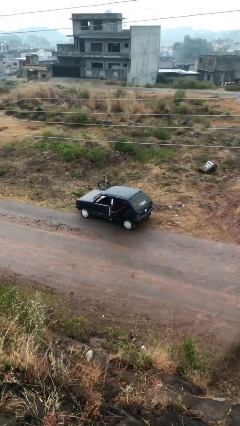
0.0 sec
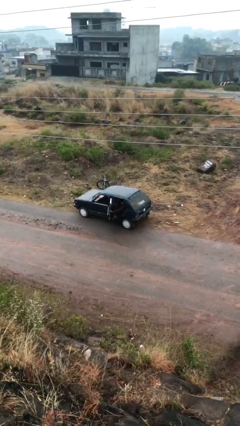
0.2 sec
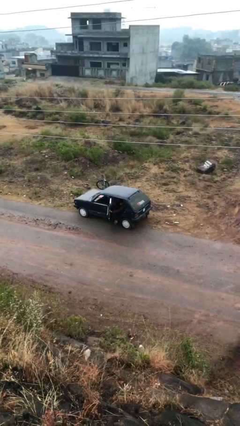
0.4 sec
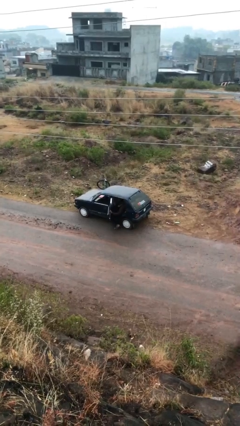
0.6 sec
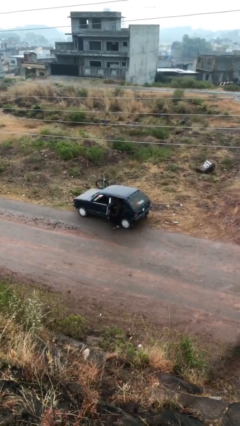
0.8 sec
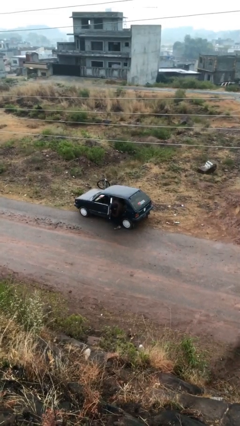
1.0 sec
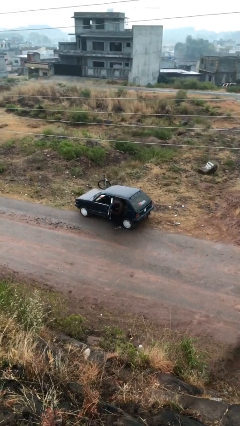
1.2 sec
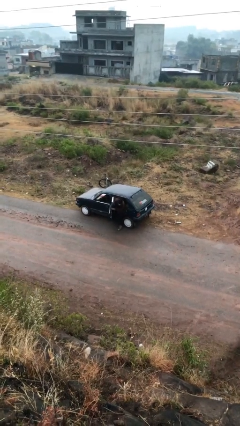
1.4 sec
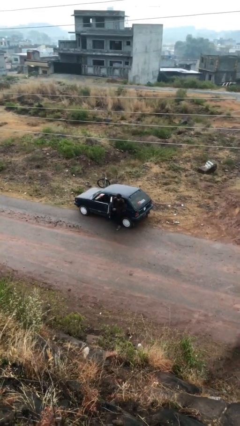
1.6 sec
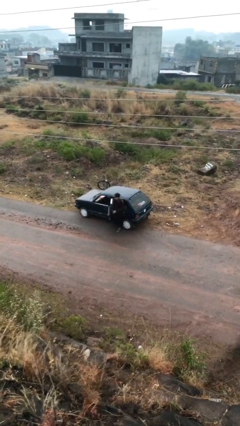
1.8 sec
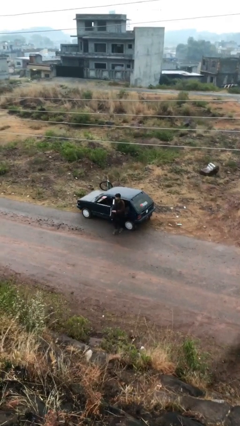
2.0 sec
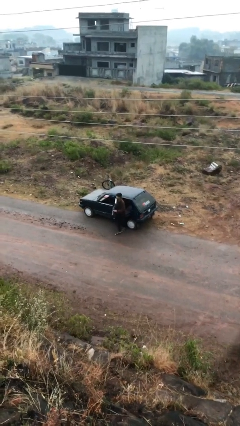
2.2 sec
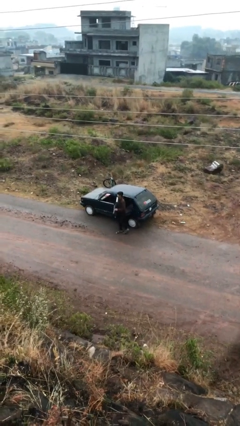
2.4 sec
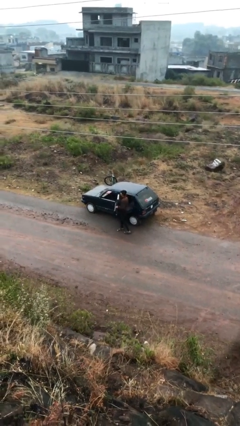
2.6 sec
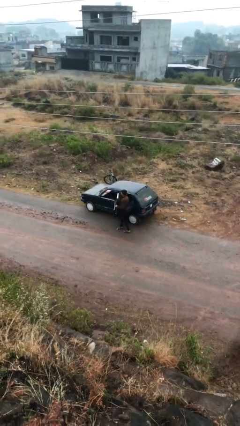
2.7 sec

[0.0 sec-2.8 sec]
person exits car

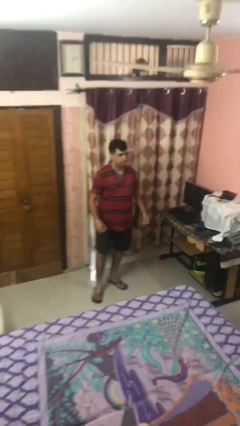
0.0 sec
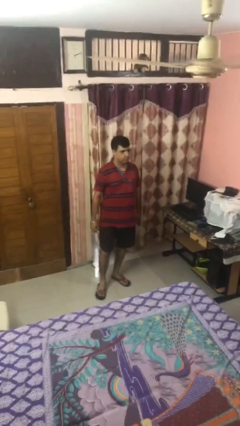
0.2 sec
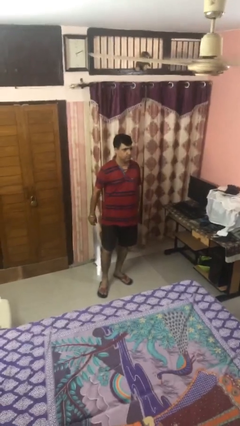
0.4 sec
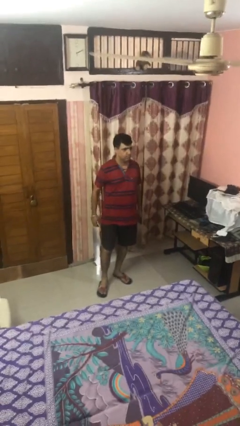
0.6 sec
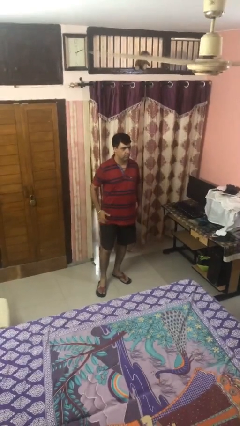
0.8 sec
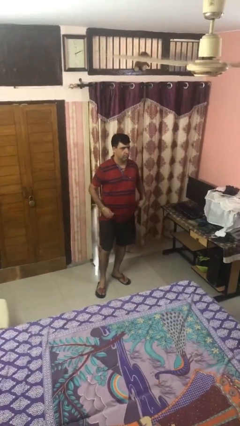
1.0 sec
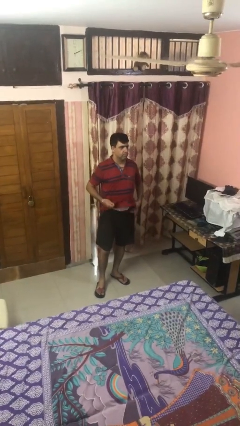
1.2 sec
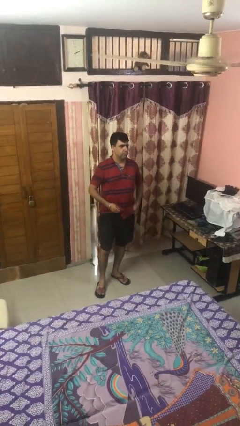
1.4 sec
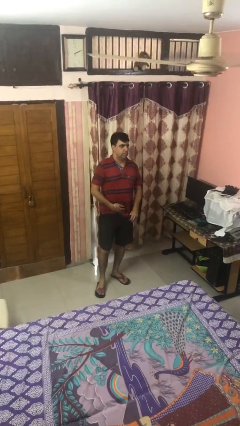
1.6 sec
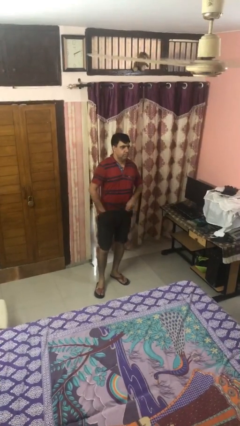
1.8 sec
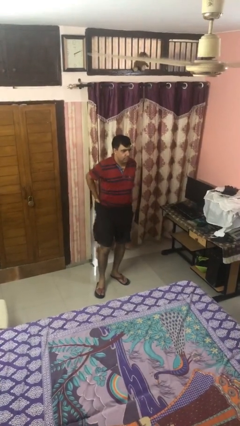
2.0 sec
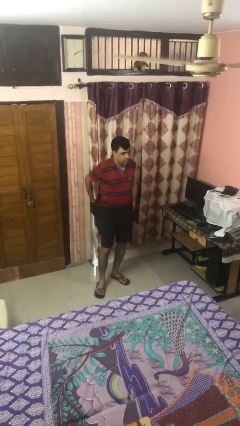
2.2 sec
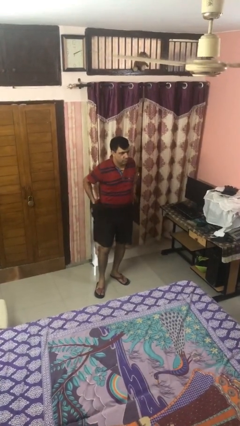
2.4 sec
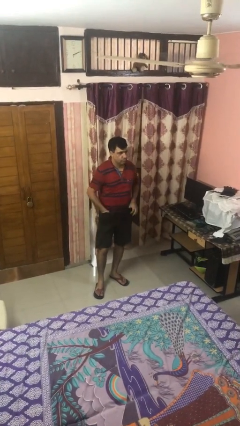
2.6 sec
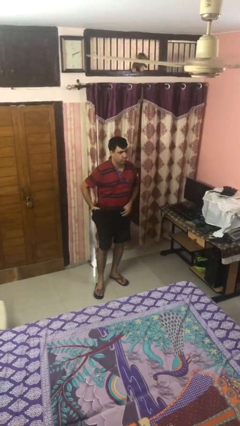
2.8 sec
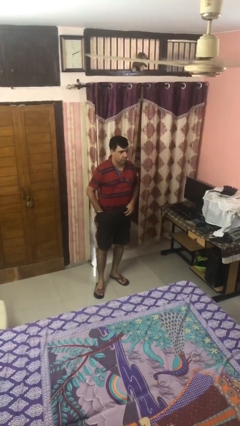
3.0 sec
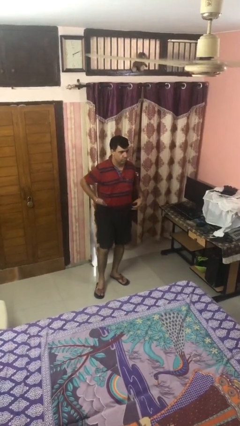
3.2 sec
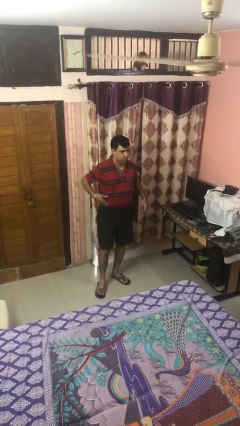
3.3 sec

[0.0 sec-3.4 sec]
person tucks in shirt

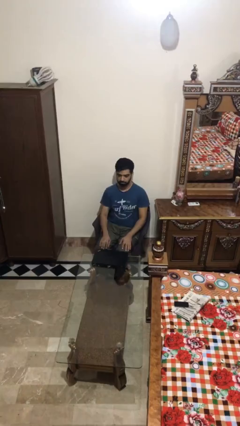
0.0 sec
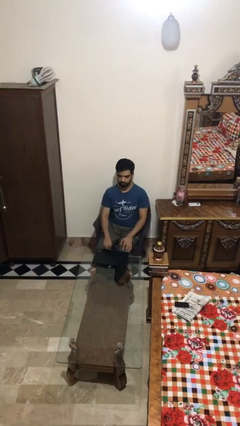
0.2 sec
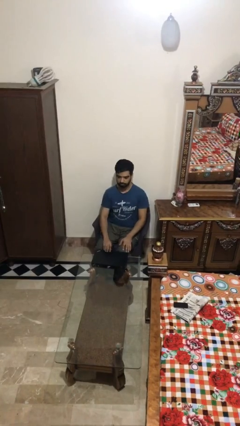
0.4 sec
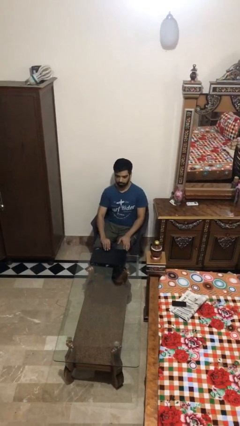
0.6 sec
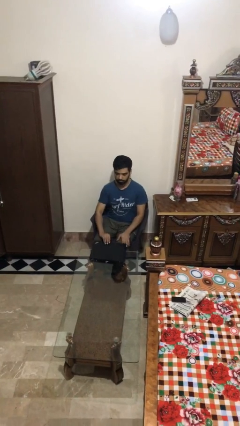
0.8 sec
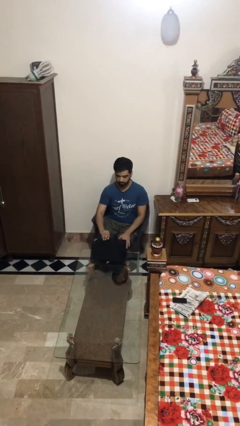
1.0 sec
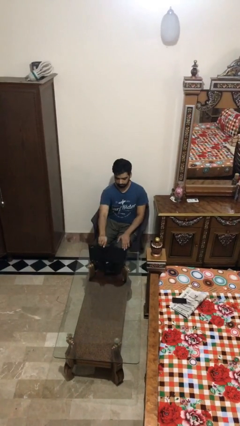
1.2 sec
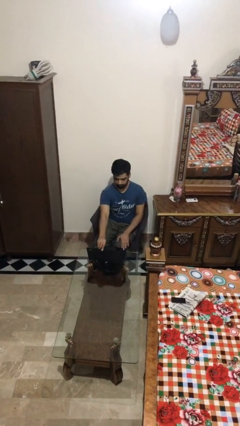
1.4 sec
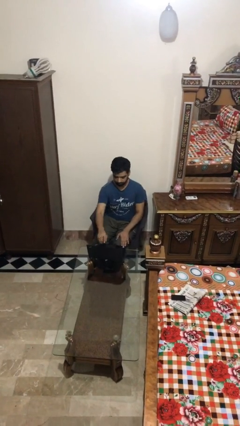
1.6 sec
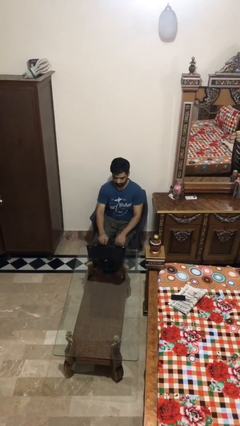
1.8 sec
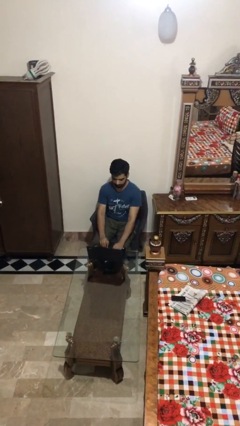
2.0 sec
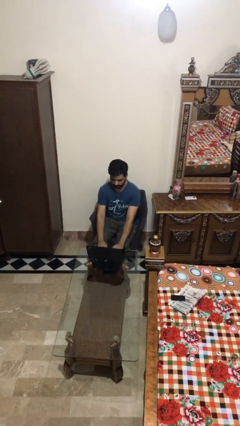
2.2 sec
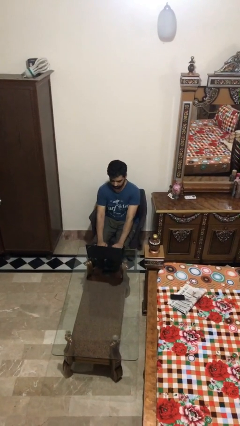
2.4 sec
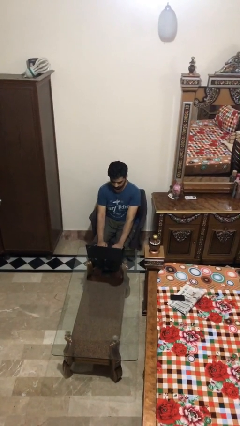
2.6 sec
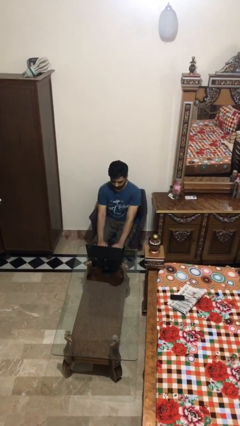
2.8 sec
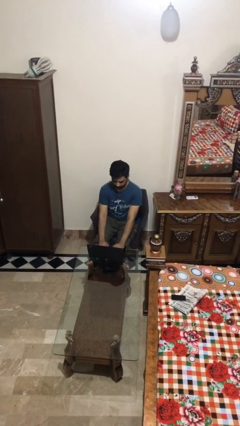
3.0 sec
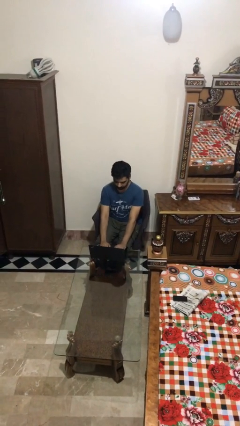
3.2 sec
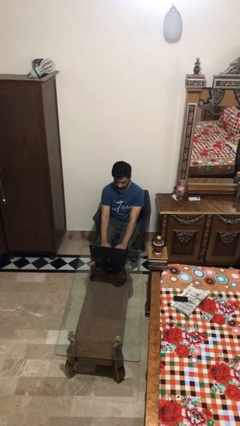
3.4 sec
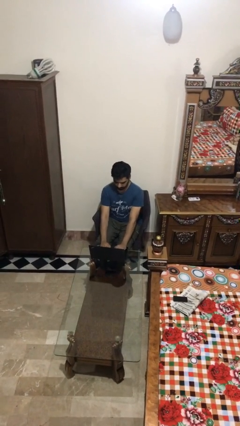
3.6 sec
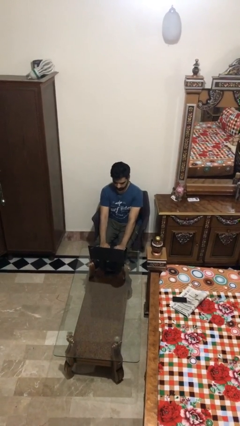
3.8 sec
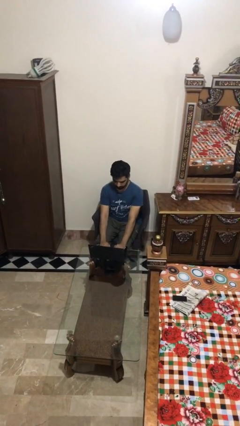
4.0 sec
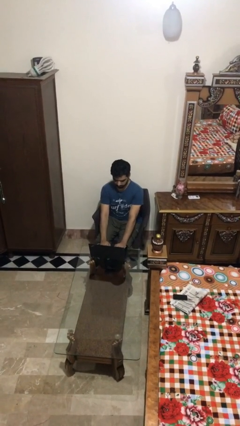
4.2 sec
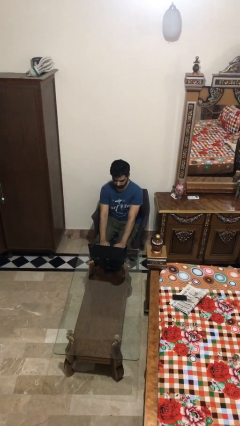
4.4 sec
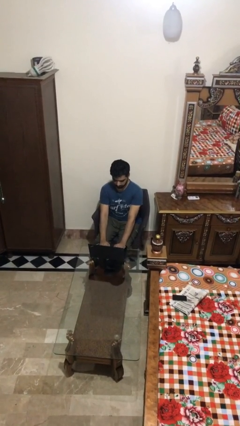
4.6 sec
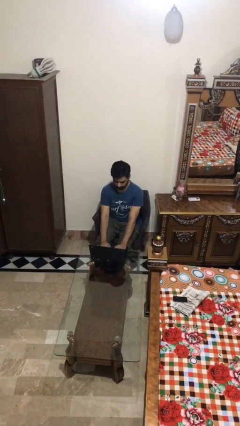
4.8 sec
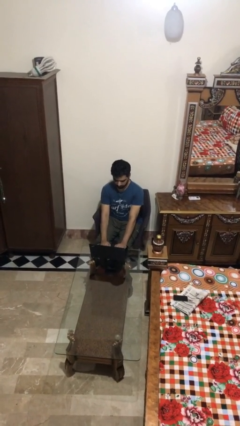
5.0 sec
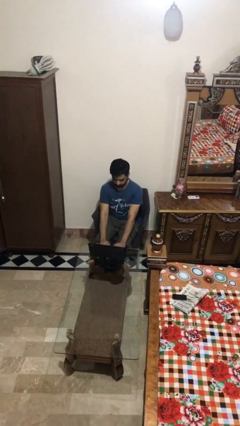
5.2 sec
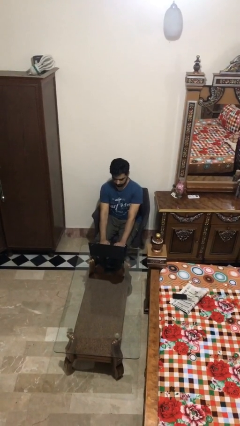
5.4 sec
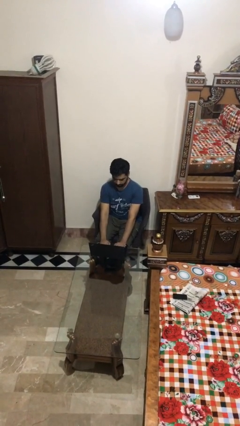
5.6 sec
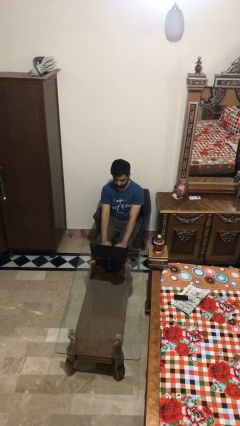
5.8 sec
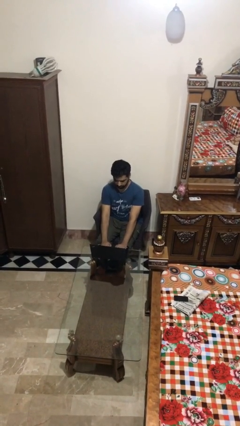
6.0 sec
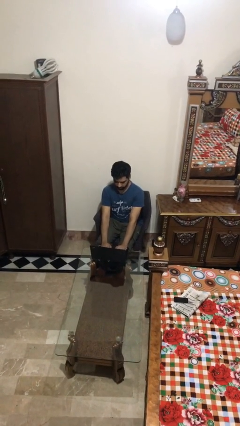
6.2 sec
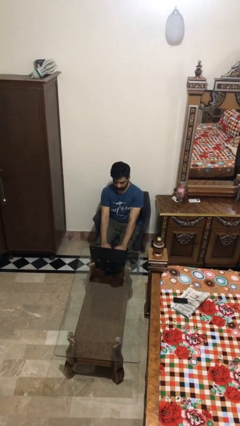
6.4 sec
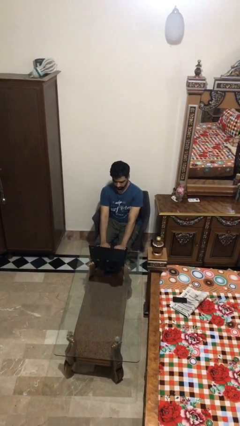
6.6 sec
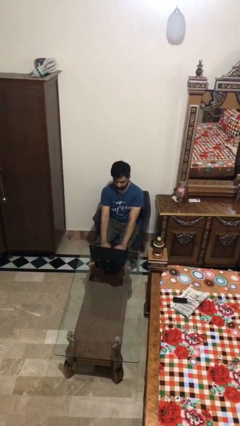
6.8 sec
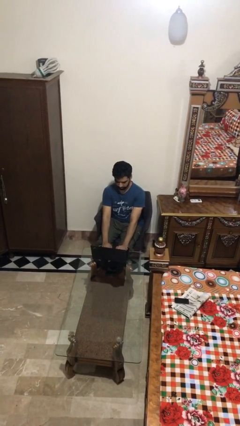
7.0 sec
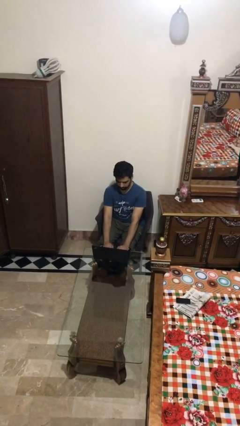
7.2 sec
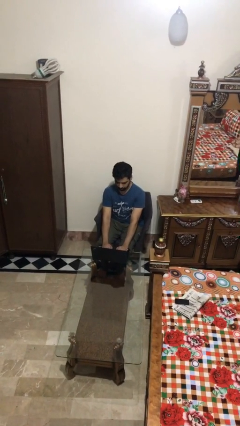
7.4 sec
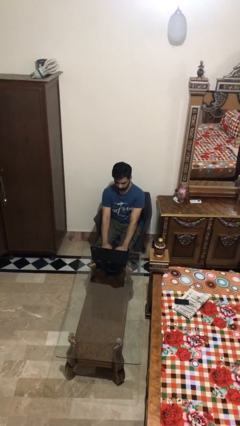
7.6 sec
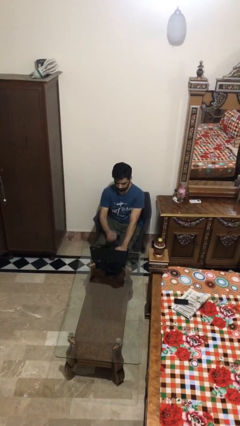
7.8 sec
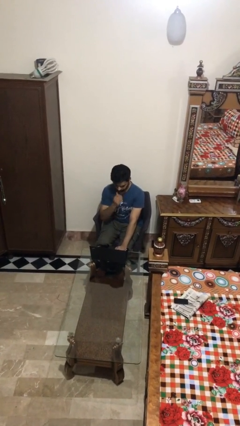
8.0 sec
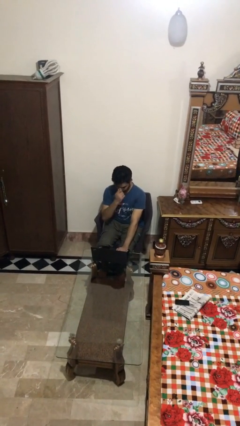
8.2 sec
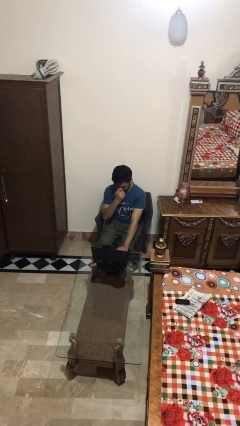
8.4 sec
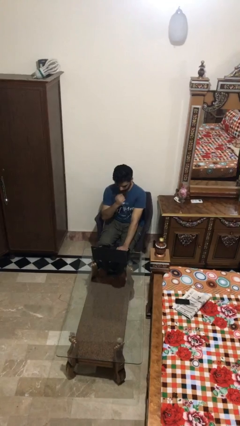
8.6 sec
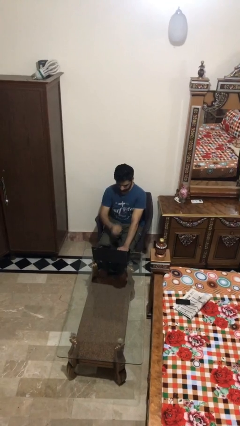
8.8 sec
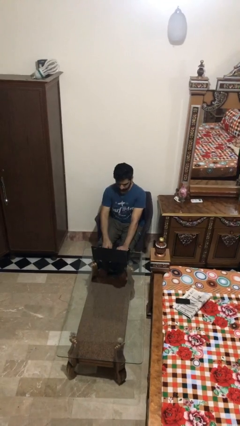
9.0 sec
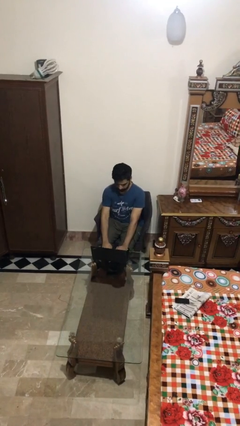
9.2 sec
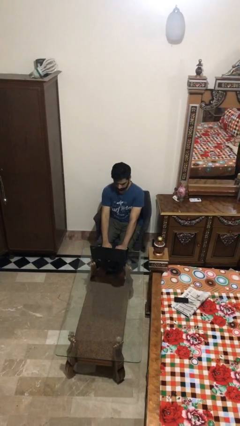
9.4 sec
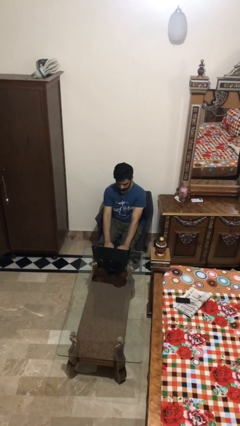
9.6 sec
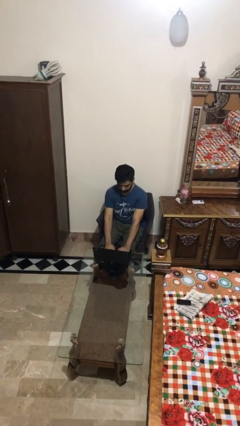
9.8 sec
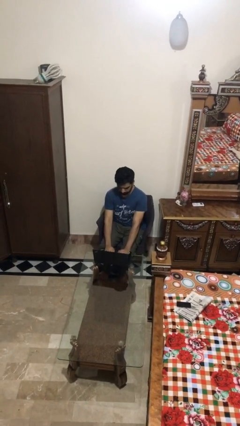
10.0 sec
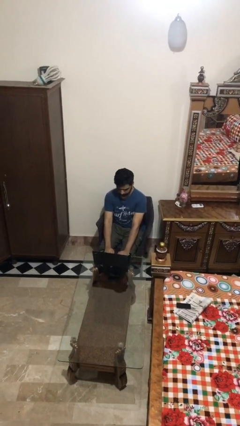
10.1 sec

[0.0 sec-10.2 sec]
person interacts with laptop

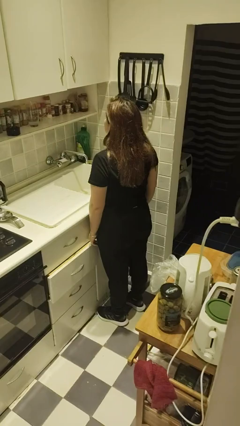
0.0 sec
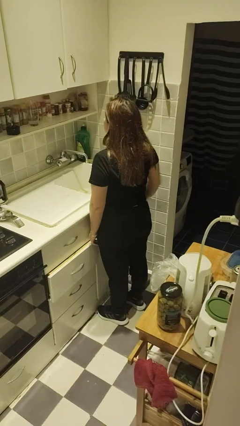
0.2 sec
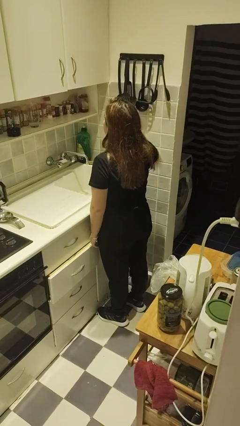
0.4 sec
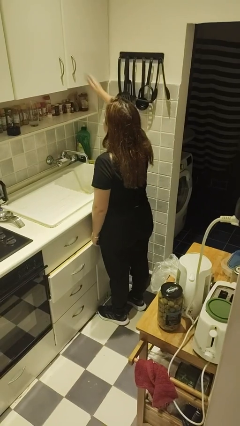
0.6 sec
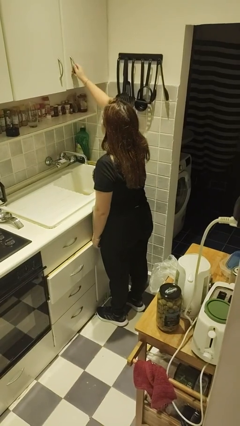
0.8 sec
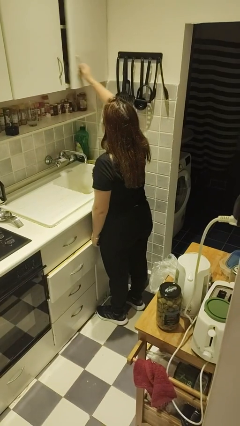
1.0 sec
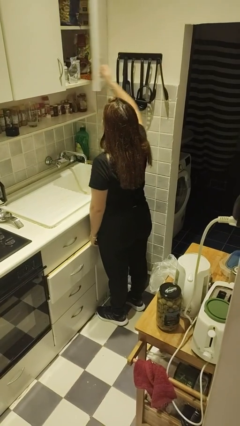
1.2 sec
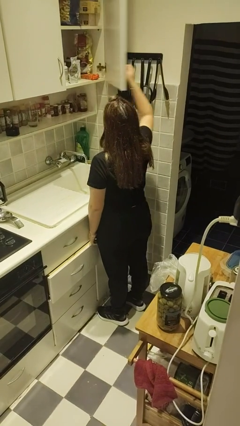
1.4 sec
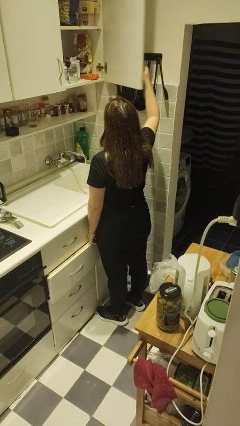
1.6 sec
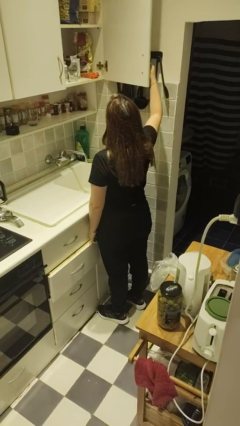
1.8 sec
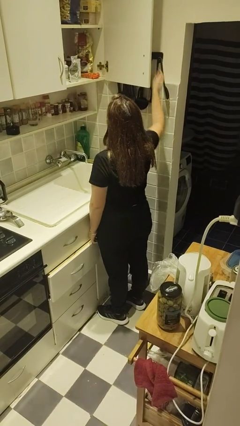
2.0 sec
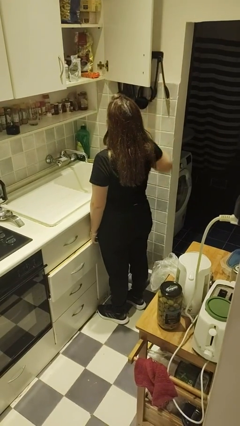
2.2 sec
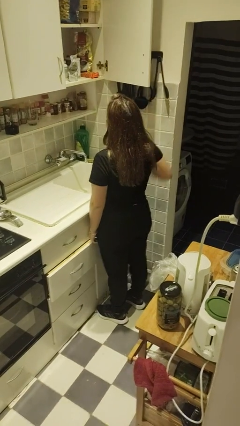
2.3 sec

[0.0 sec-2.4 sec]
person opens cabinet
